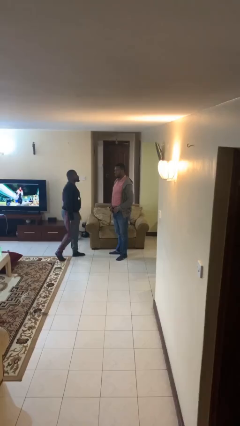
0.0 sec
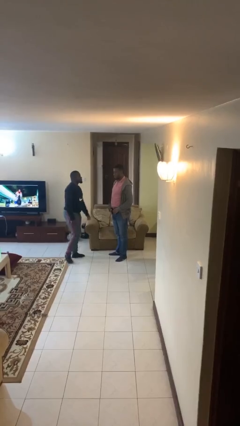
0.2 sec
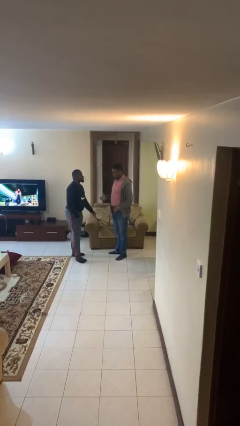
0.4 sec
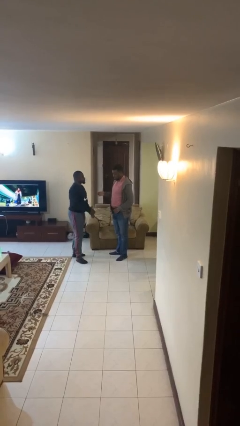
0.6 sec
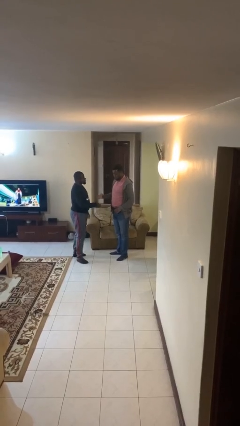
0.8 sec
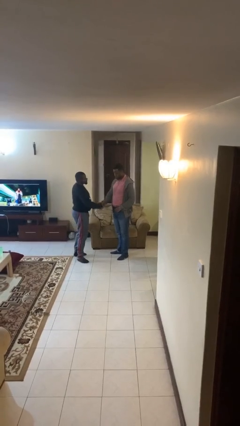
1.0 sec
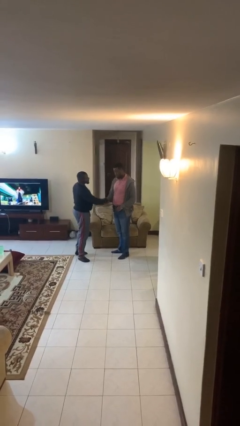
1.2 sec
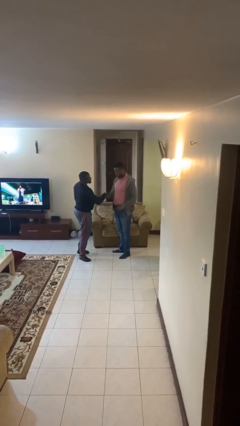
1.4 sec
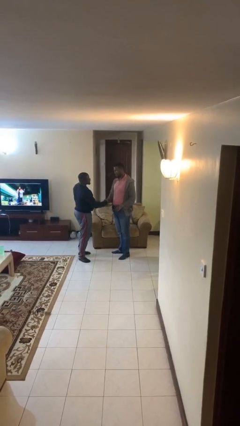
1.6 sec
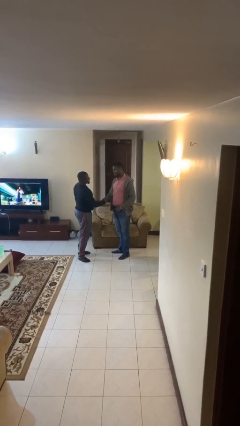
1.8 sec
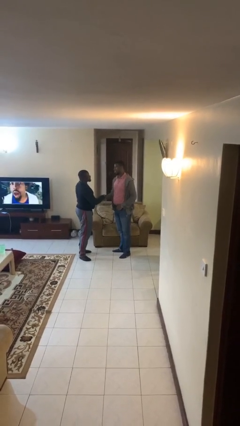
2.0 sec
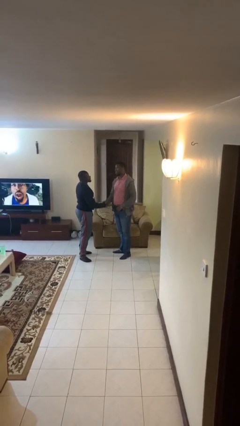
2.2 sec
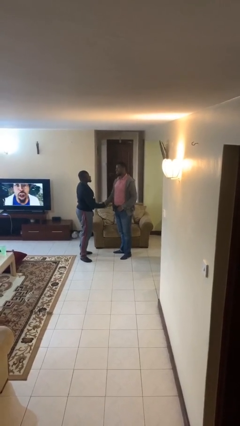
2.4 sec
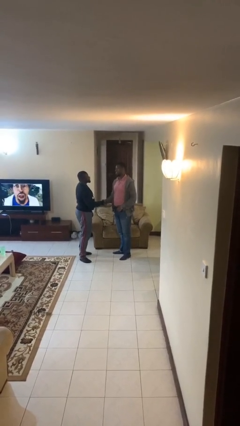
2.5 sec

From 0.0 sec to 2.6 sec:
person shakes hand

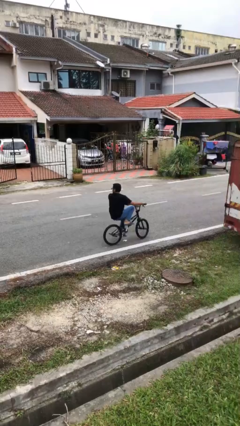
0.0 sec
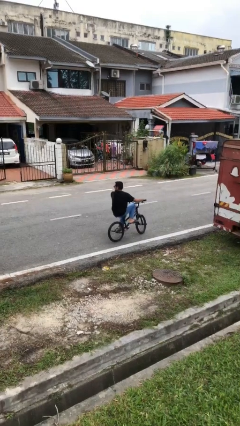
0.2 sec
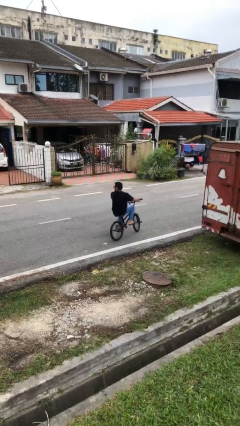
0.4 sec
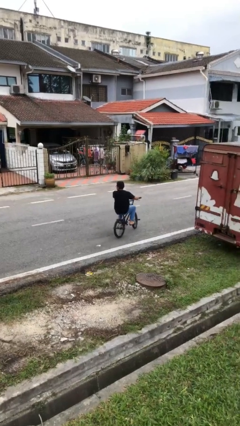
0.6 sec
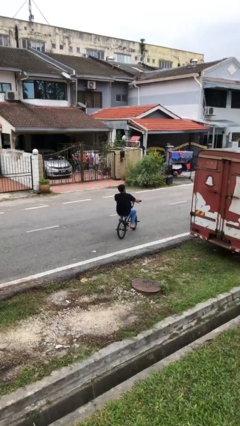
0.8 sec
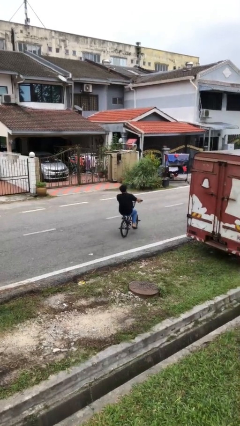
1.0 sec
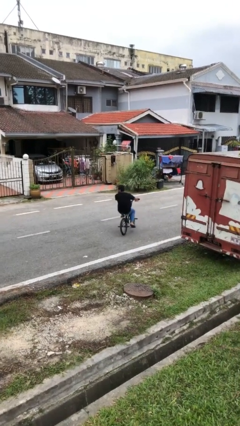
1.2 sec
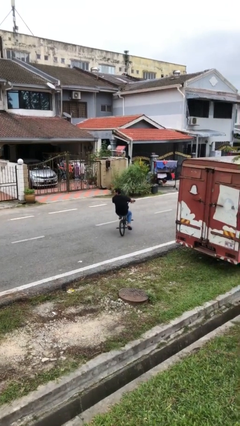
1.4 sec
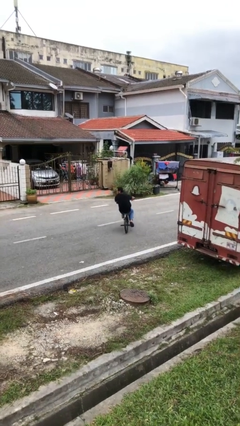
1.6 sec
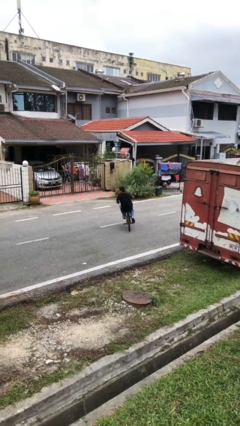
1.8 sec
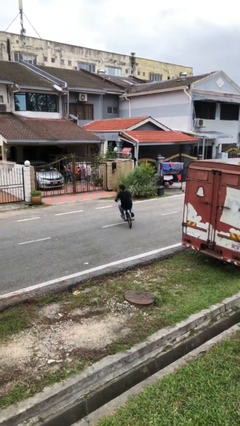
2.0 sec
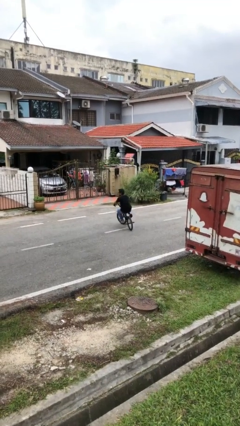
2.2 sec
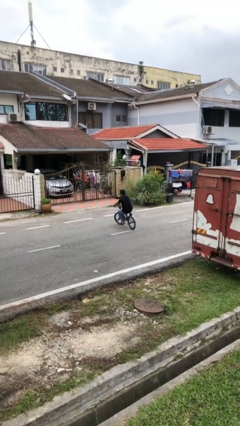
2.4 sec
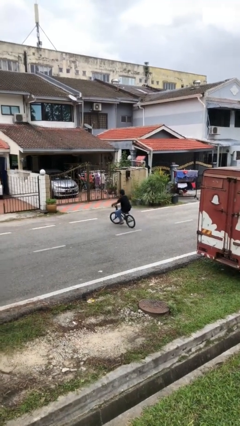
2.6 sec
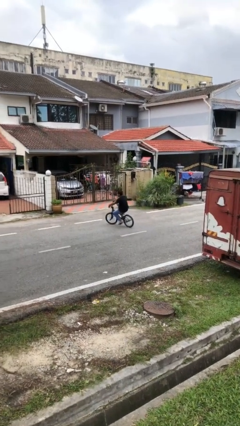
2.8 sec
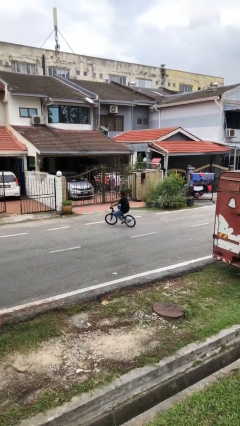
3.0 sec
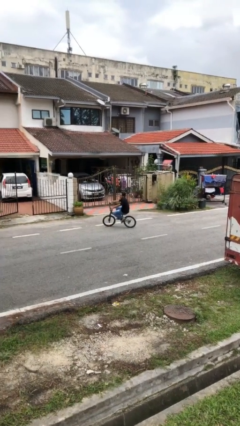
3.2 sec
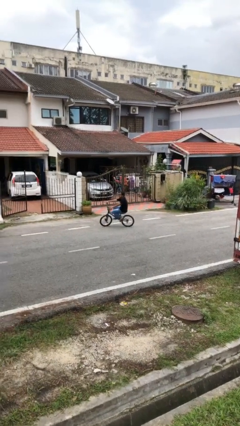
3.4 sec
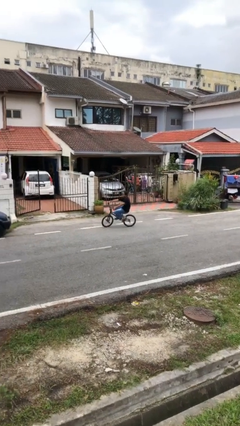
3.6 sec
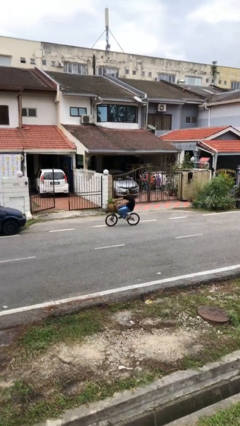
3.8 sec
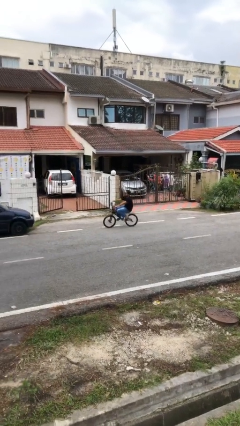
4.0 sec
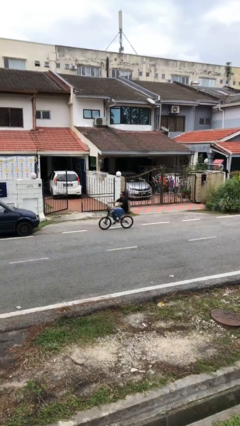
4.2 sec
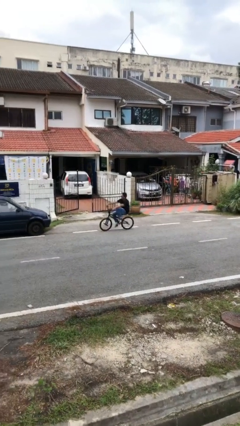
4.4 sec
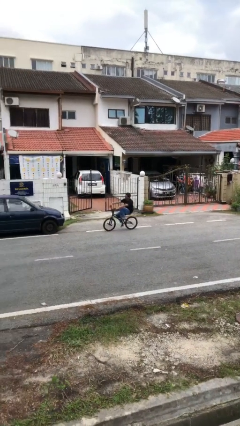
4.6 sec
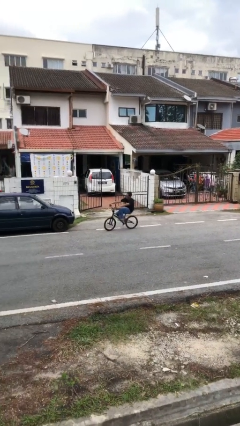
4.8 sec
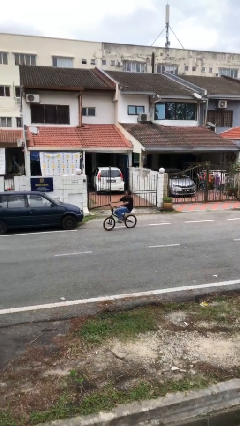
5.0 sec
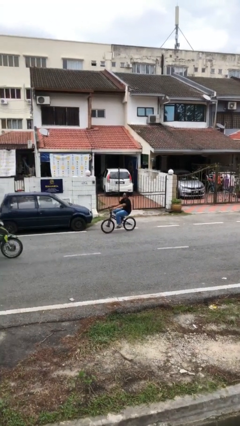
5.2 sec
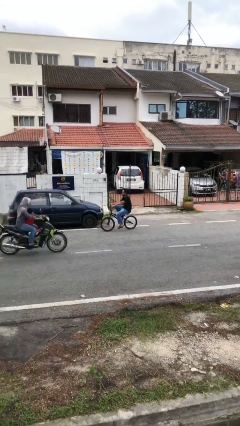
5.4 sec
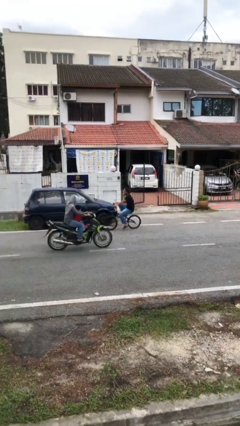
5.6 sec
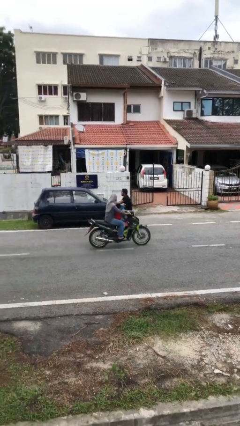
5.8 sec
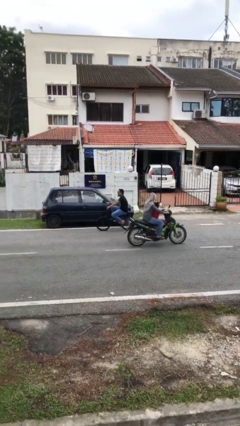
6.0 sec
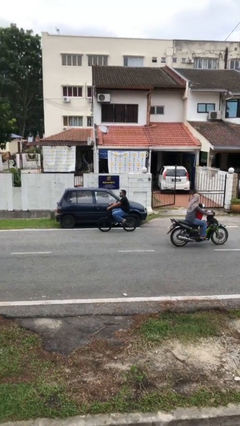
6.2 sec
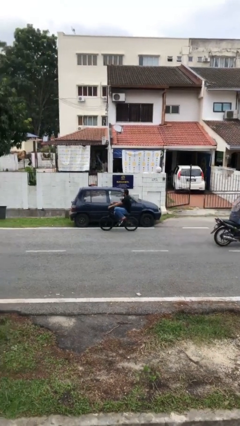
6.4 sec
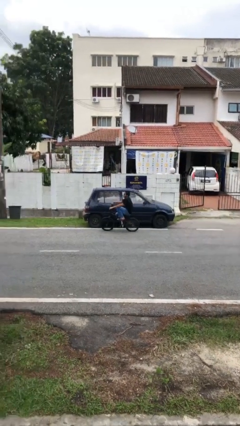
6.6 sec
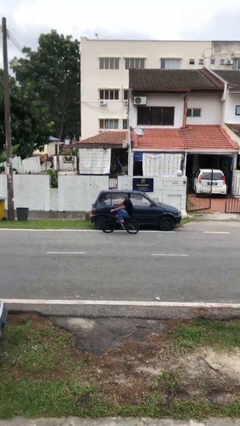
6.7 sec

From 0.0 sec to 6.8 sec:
person rides bicycle

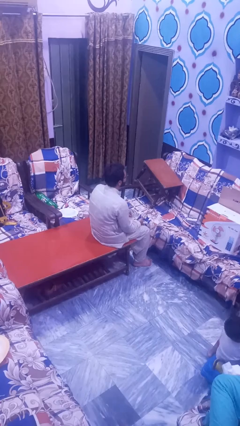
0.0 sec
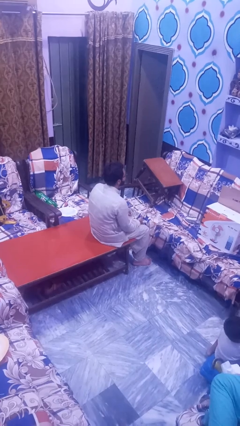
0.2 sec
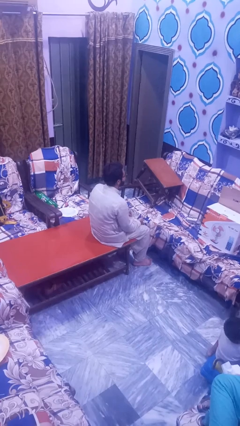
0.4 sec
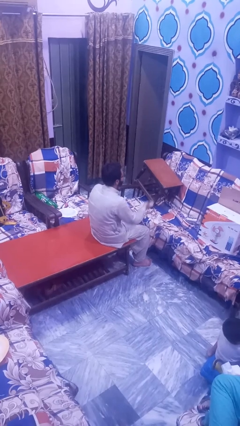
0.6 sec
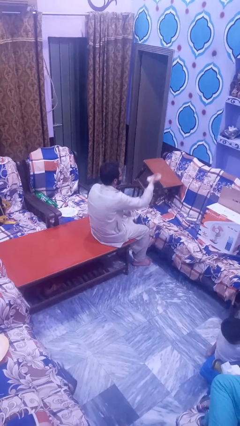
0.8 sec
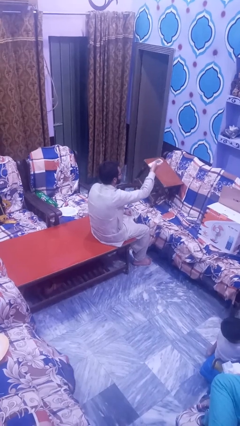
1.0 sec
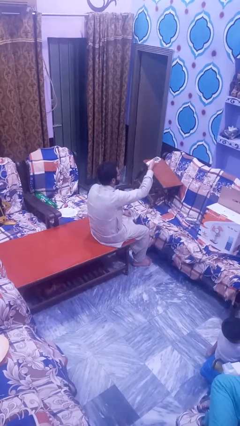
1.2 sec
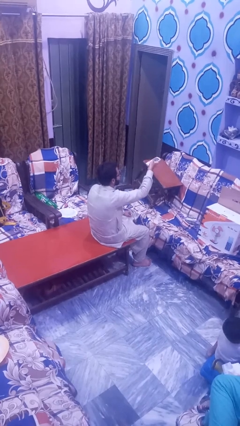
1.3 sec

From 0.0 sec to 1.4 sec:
person uses television remote

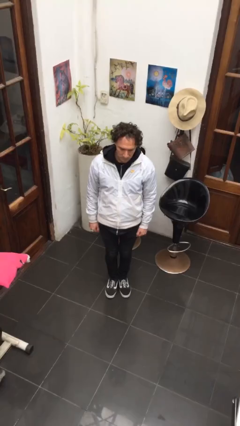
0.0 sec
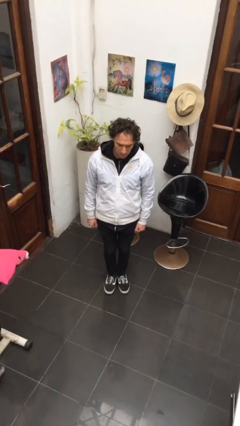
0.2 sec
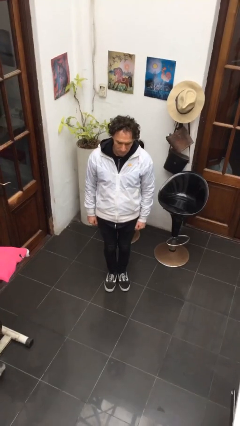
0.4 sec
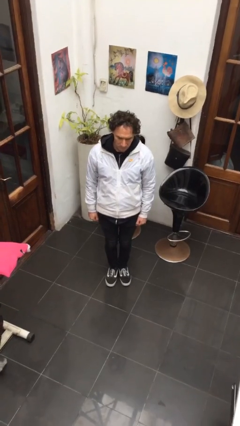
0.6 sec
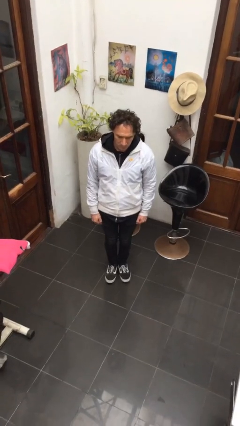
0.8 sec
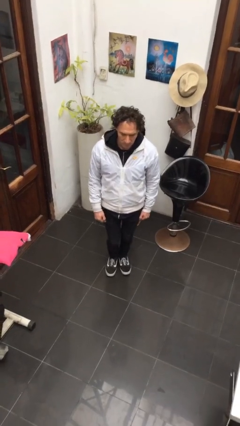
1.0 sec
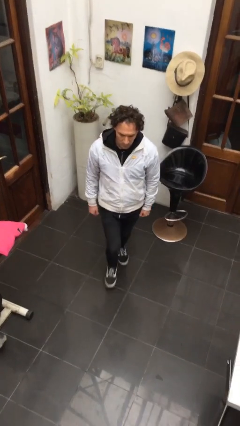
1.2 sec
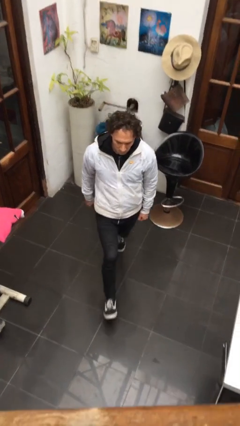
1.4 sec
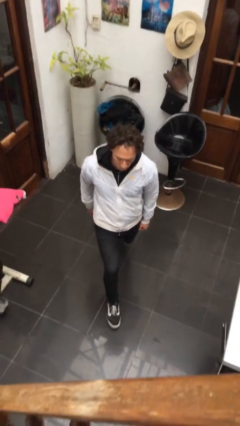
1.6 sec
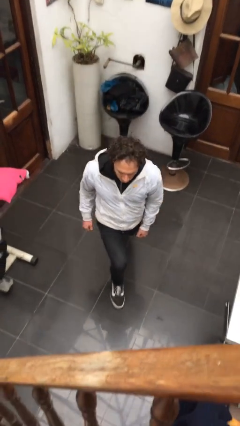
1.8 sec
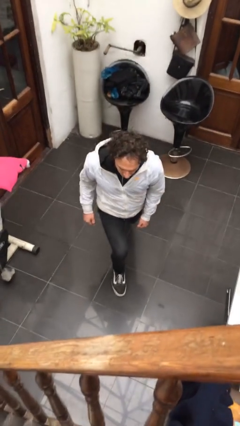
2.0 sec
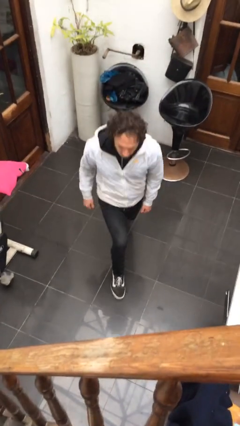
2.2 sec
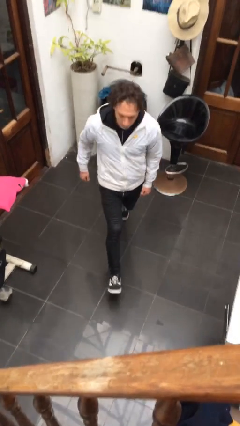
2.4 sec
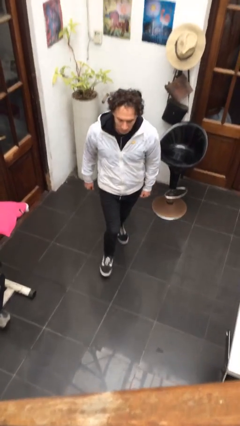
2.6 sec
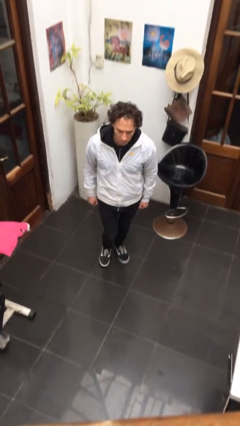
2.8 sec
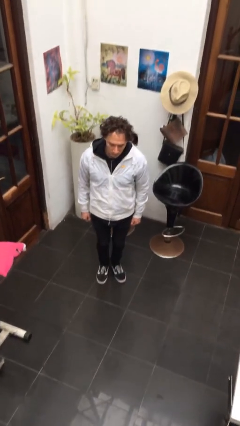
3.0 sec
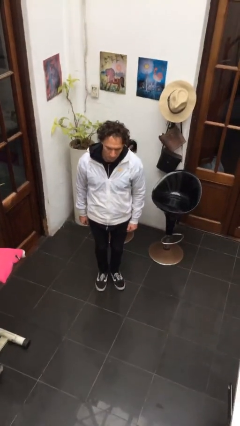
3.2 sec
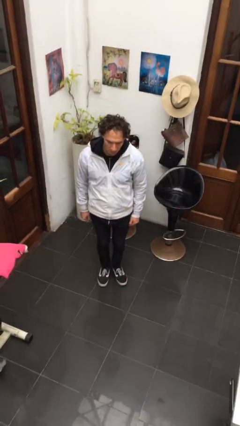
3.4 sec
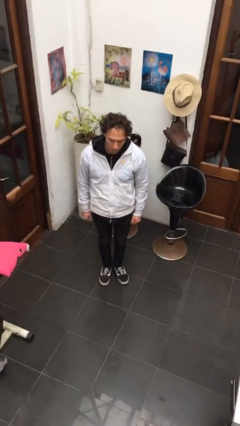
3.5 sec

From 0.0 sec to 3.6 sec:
person exercises with lunges

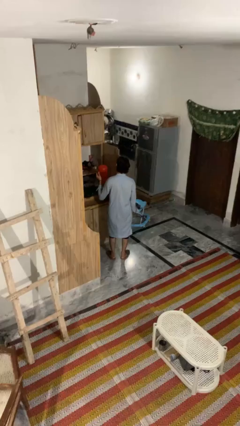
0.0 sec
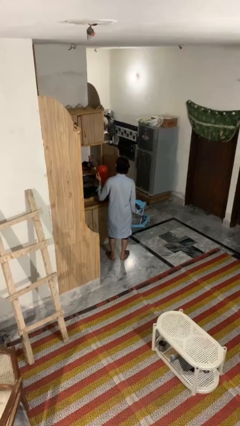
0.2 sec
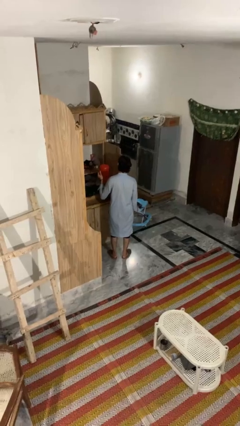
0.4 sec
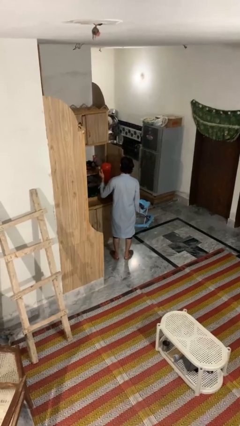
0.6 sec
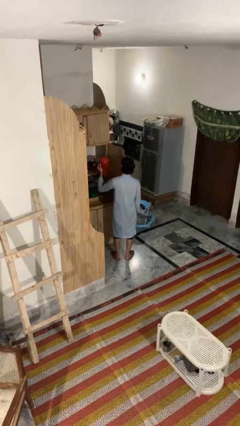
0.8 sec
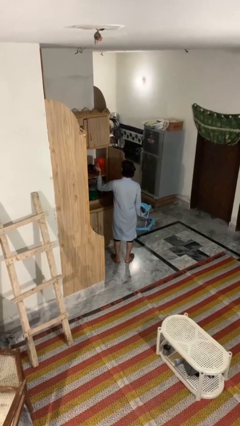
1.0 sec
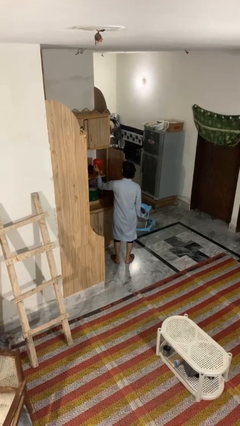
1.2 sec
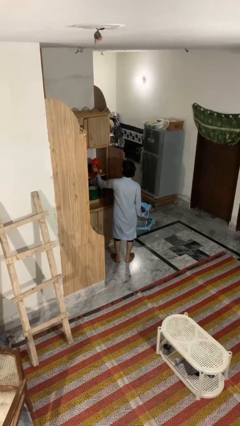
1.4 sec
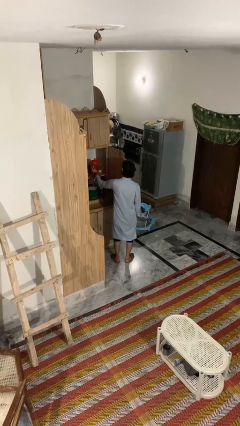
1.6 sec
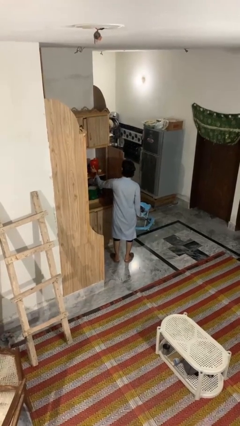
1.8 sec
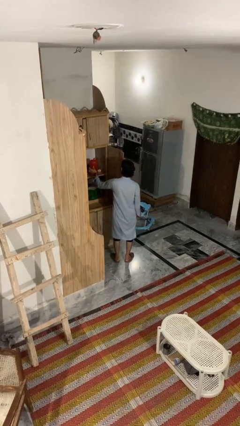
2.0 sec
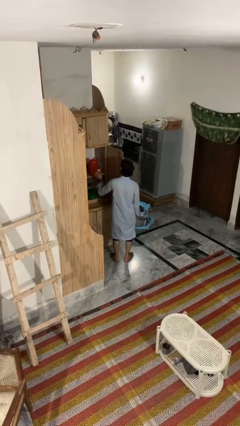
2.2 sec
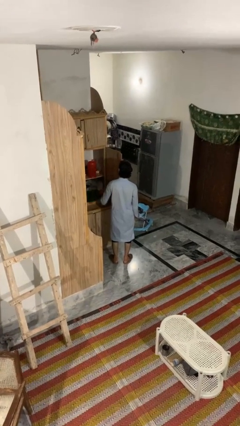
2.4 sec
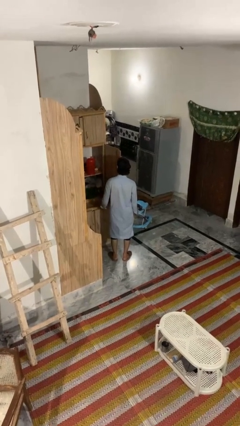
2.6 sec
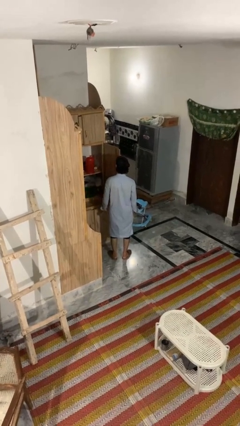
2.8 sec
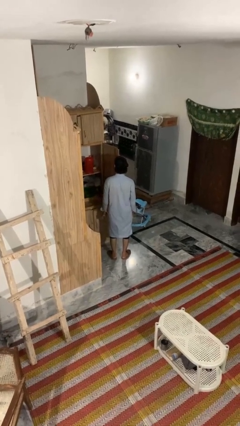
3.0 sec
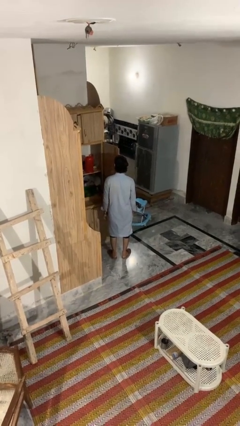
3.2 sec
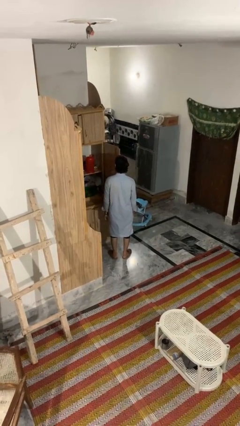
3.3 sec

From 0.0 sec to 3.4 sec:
person puts down object into cabinet
